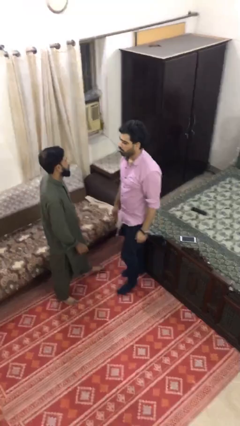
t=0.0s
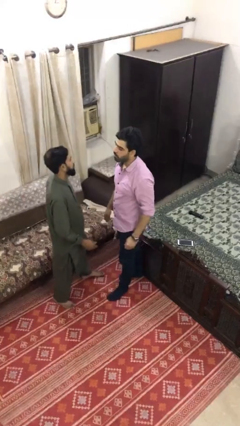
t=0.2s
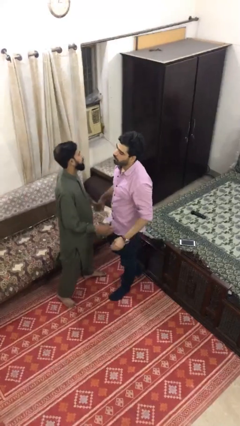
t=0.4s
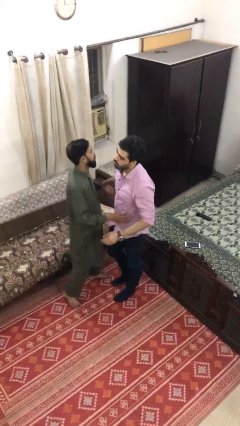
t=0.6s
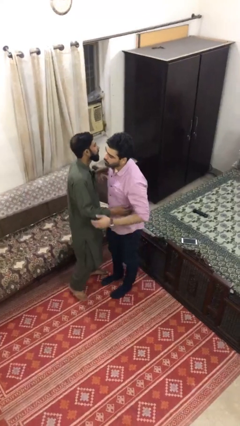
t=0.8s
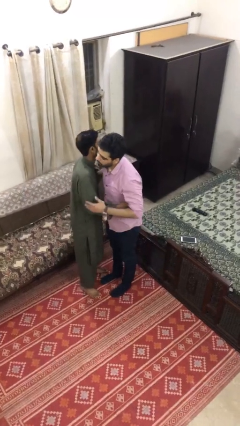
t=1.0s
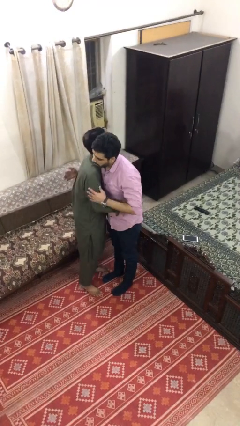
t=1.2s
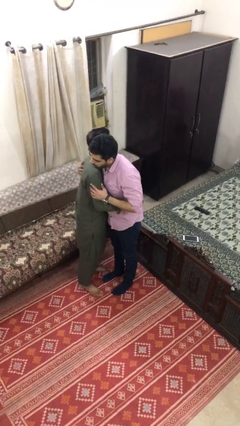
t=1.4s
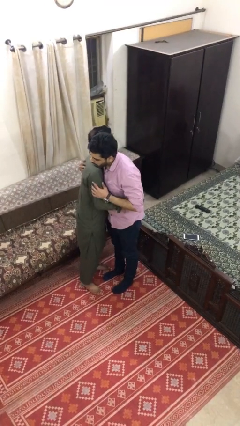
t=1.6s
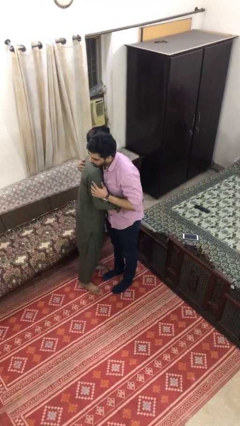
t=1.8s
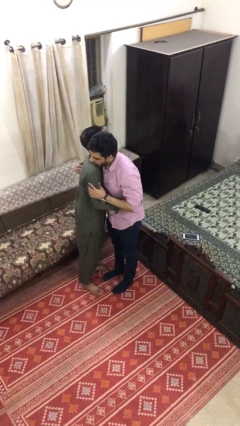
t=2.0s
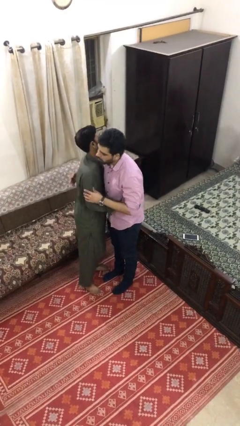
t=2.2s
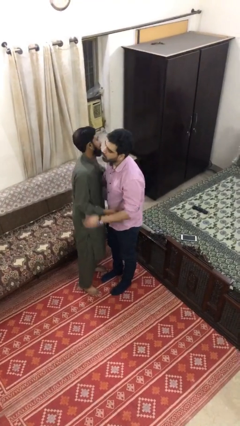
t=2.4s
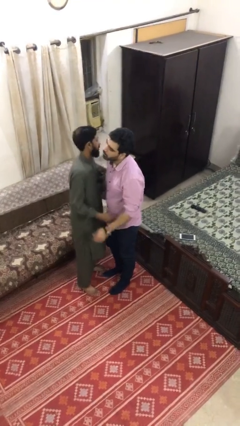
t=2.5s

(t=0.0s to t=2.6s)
person embraces person

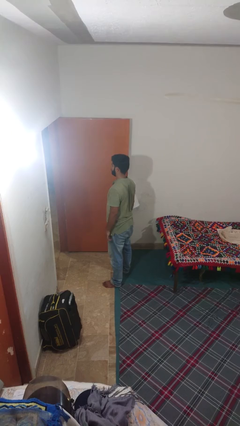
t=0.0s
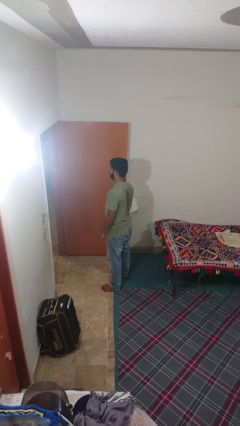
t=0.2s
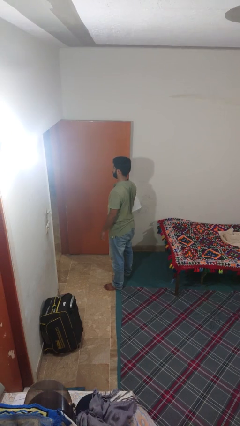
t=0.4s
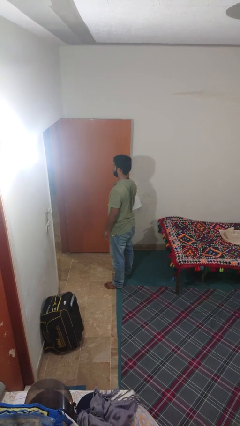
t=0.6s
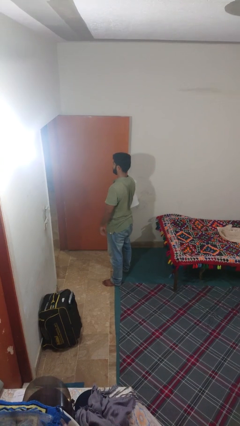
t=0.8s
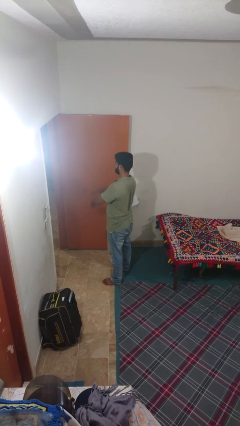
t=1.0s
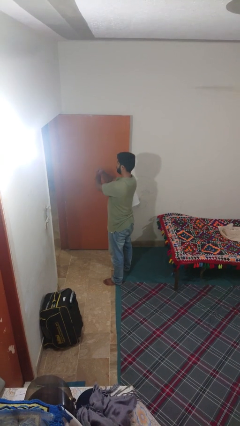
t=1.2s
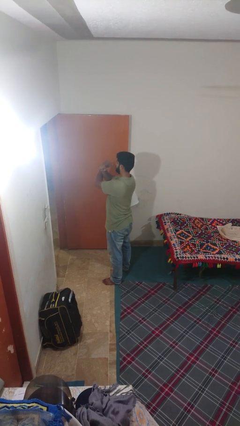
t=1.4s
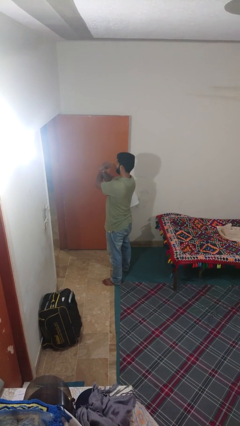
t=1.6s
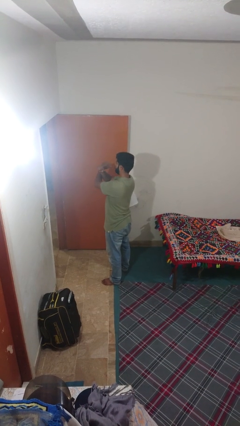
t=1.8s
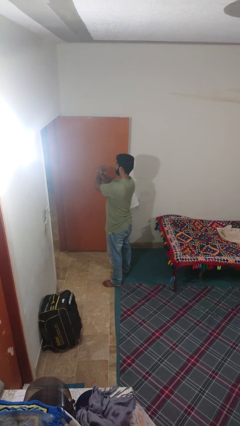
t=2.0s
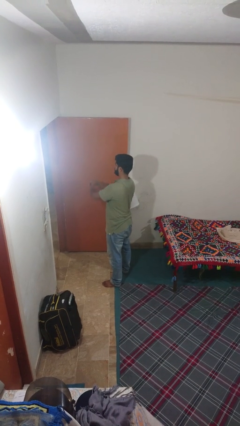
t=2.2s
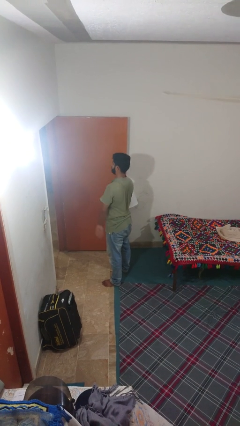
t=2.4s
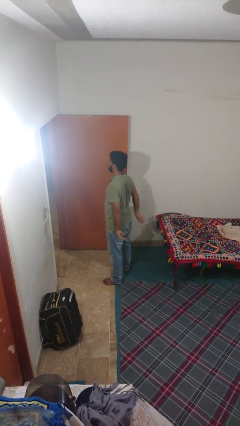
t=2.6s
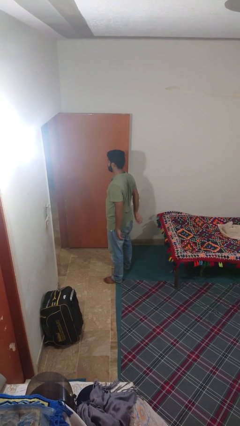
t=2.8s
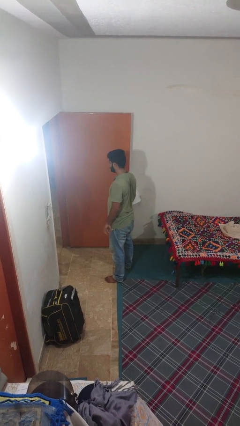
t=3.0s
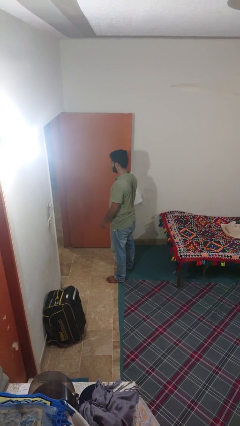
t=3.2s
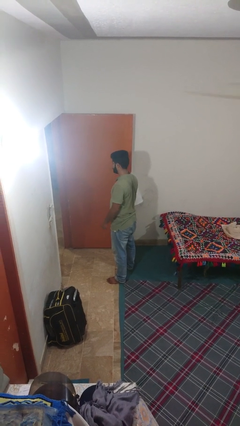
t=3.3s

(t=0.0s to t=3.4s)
person crosses arms

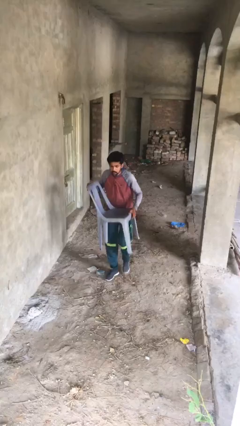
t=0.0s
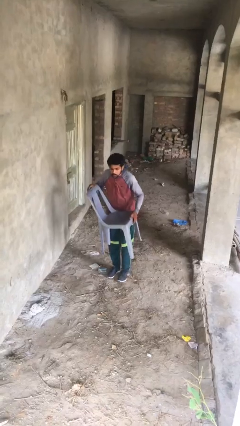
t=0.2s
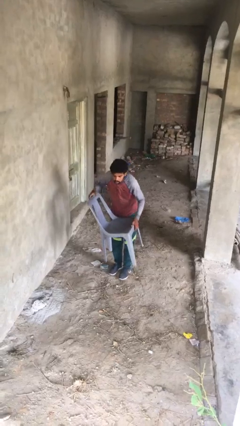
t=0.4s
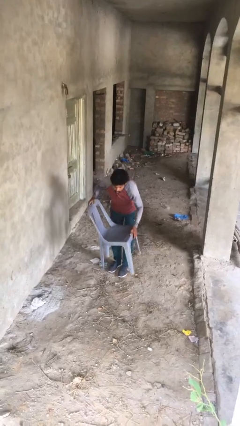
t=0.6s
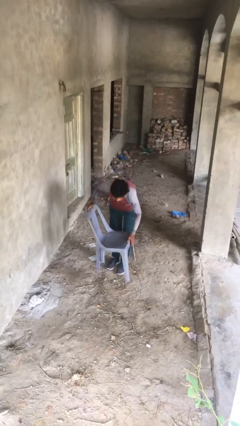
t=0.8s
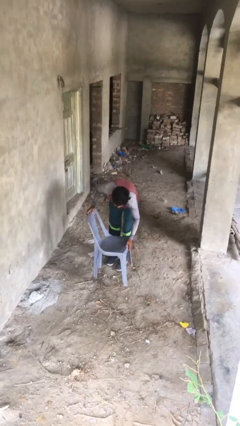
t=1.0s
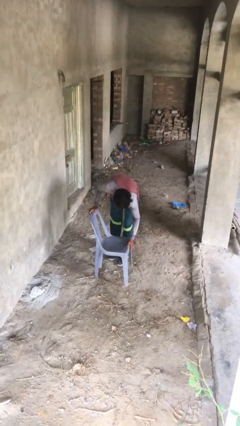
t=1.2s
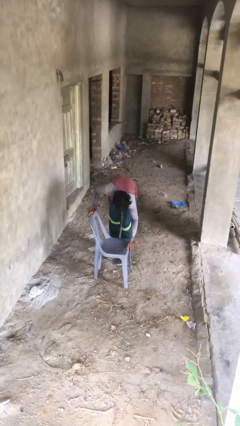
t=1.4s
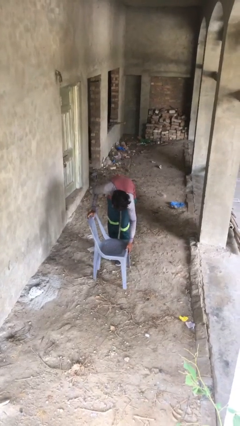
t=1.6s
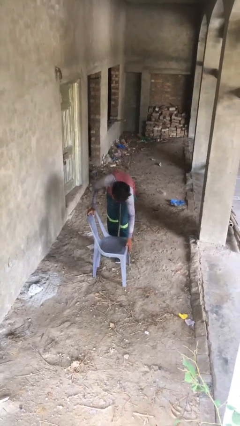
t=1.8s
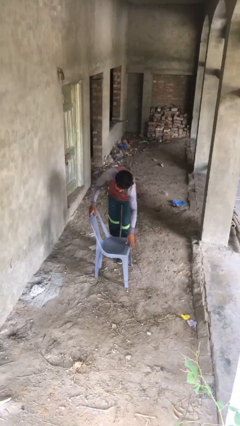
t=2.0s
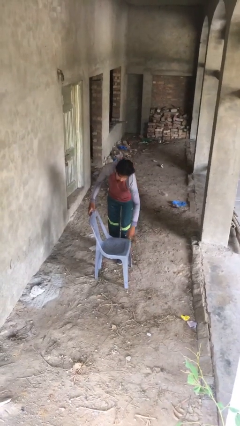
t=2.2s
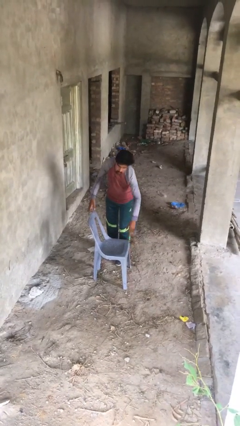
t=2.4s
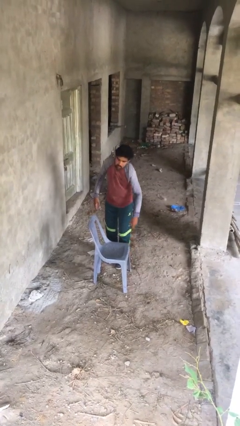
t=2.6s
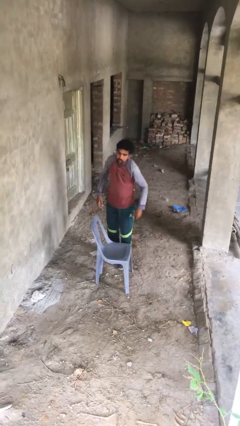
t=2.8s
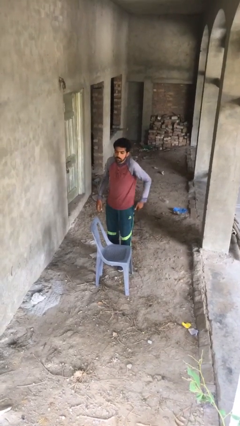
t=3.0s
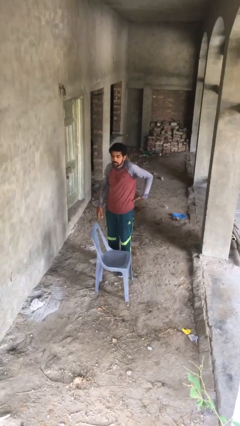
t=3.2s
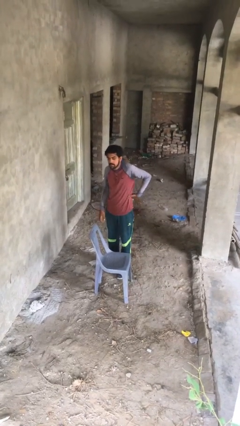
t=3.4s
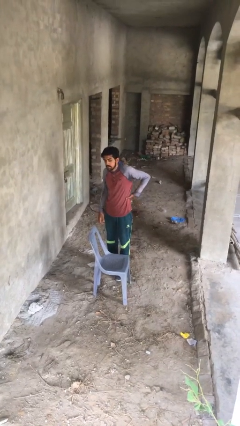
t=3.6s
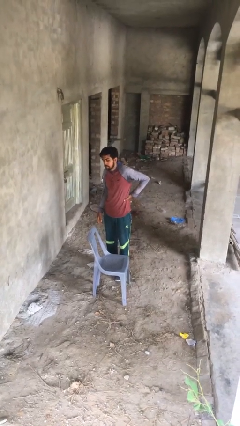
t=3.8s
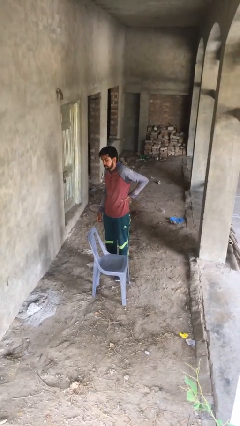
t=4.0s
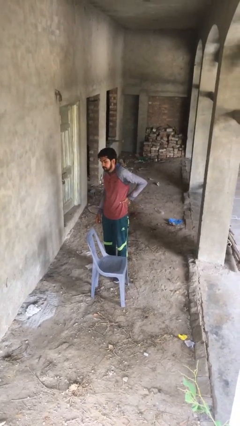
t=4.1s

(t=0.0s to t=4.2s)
person puts down object on floor

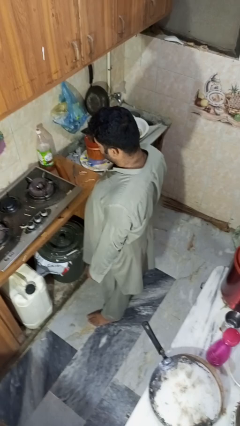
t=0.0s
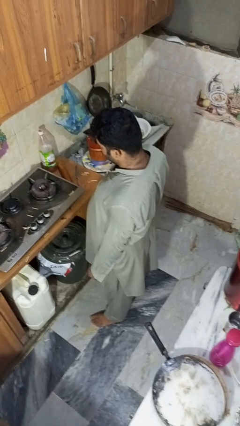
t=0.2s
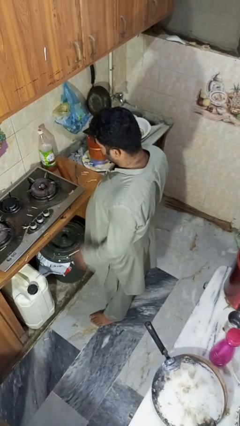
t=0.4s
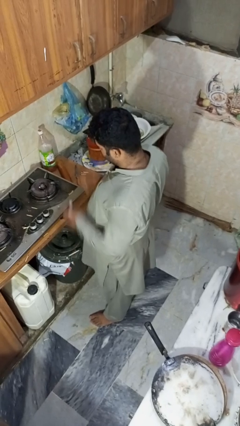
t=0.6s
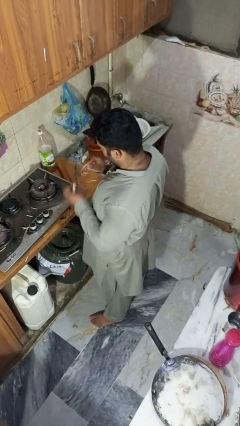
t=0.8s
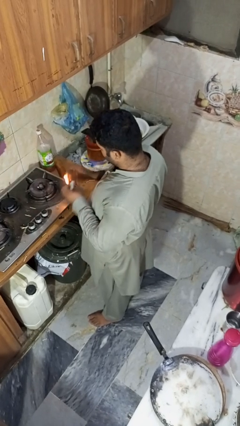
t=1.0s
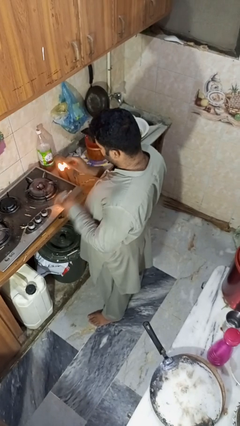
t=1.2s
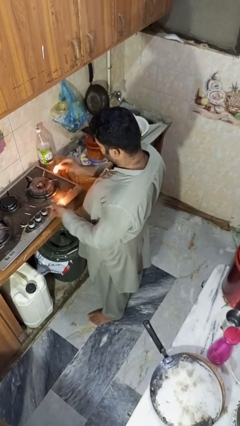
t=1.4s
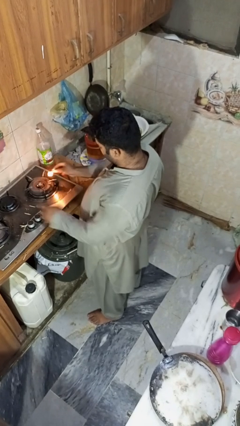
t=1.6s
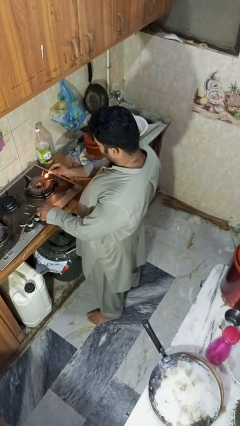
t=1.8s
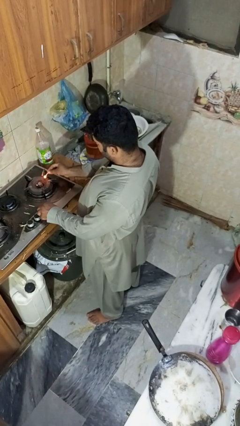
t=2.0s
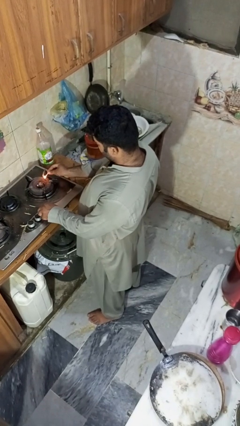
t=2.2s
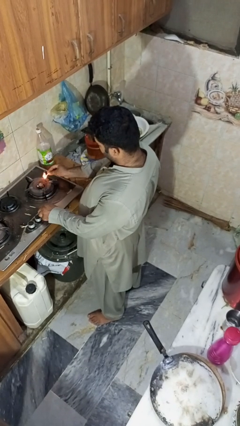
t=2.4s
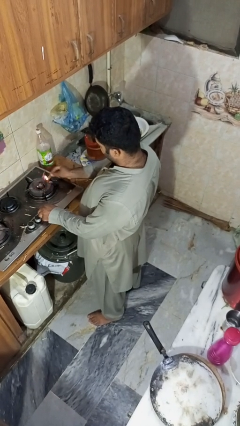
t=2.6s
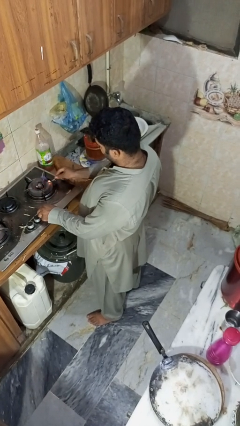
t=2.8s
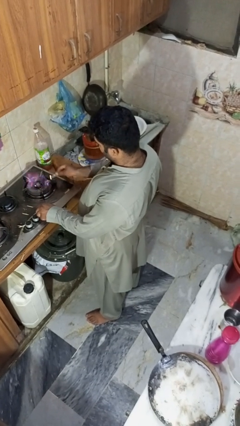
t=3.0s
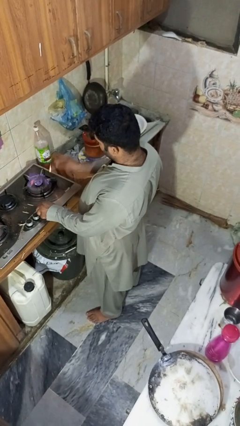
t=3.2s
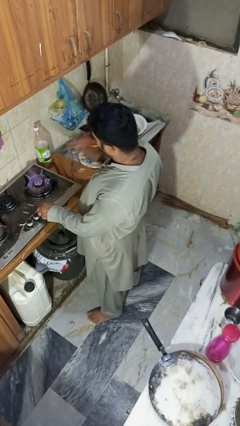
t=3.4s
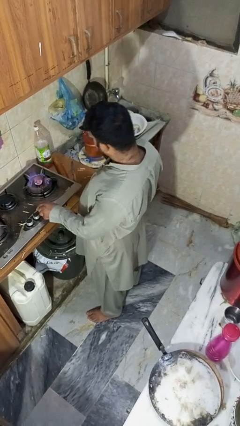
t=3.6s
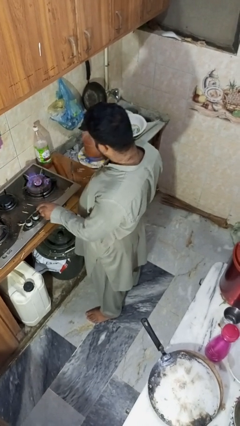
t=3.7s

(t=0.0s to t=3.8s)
person turns on stovetop

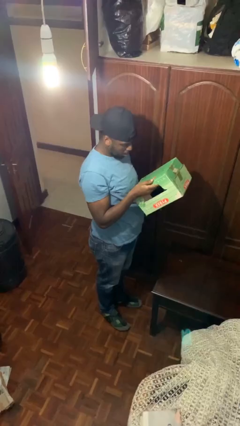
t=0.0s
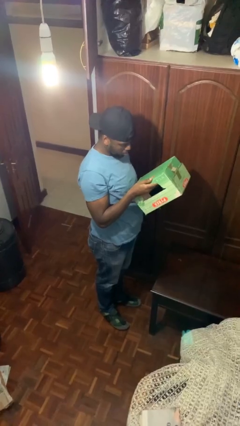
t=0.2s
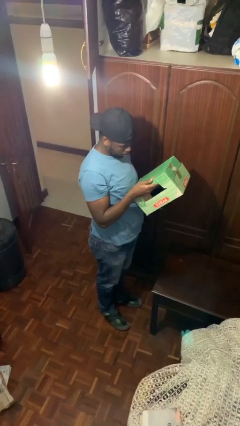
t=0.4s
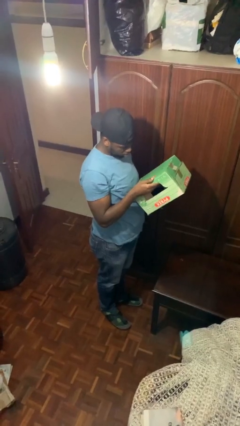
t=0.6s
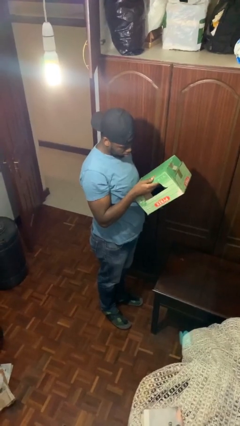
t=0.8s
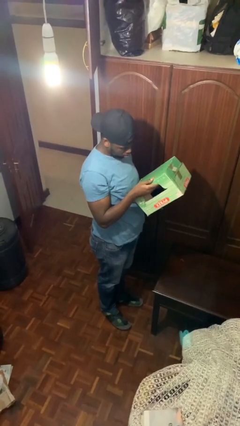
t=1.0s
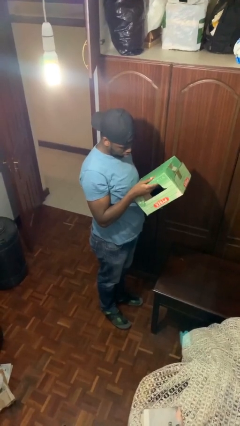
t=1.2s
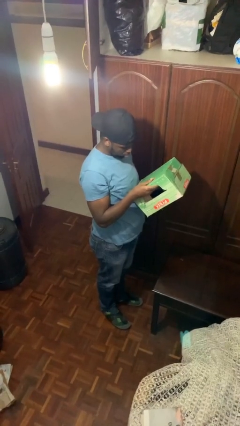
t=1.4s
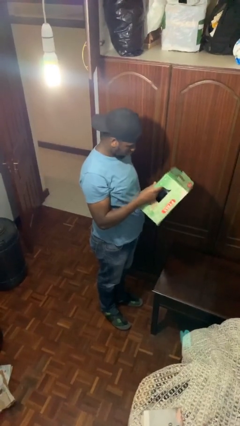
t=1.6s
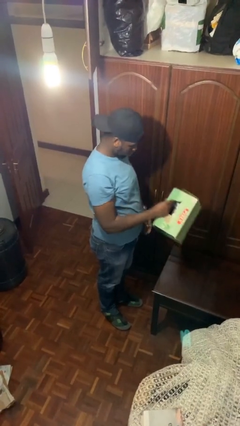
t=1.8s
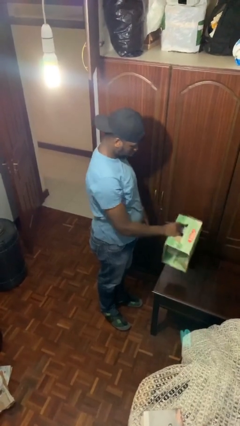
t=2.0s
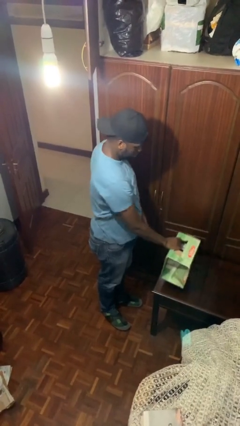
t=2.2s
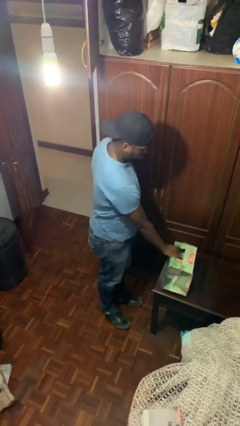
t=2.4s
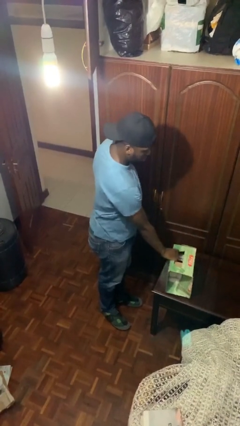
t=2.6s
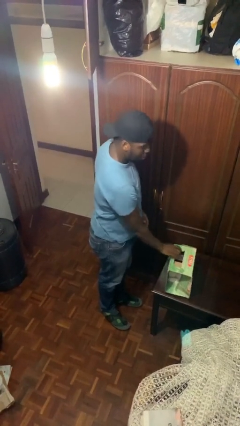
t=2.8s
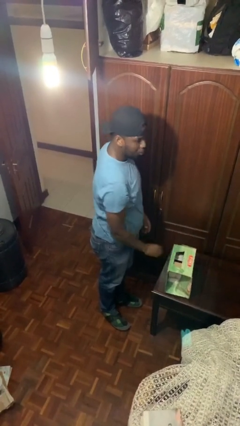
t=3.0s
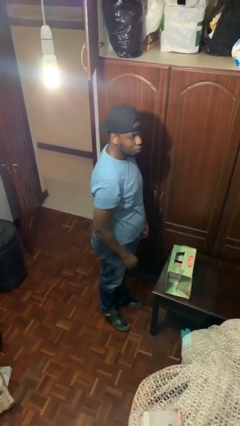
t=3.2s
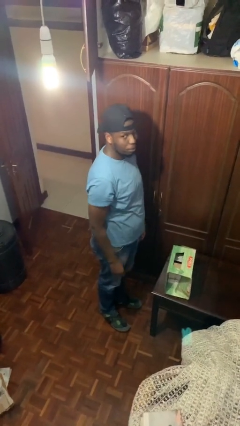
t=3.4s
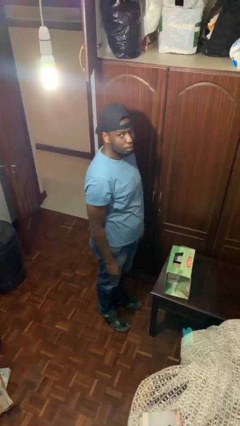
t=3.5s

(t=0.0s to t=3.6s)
person puts down object on table
